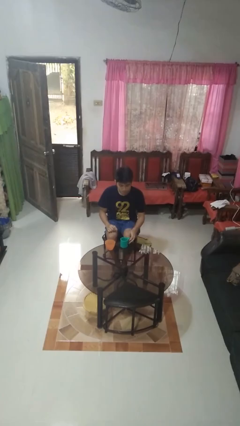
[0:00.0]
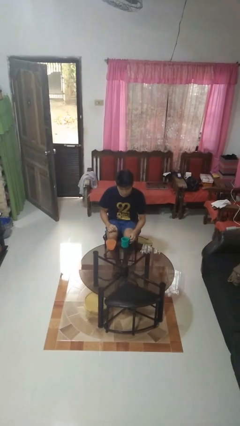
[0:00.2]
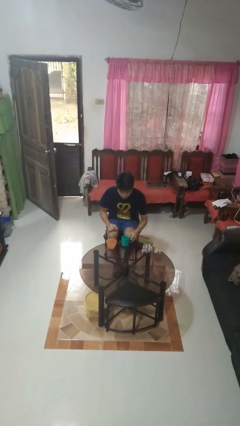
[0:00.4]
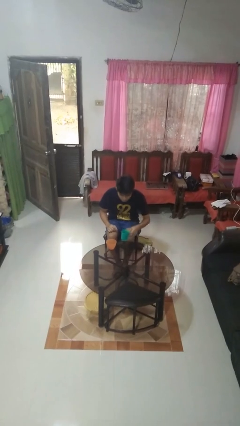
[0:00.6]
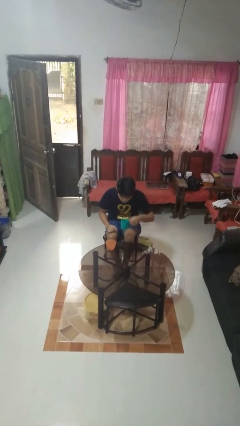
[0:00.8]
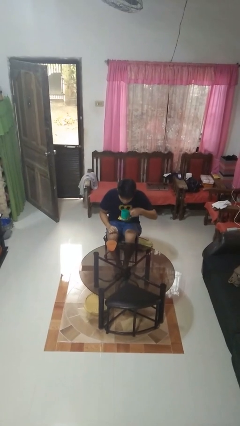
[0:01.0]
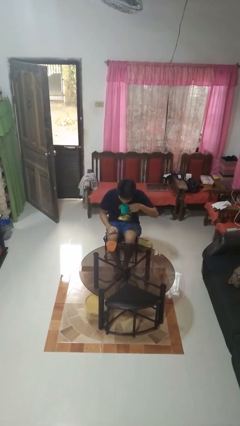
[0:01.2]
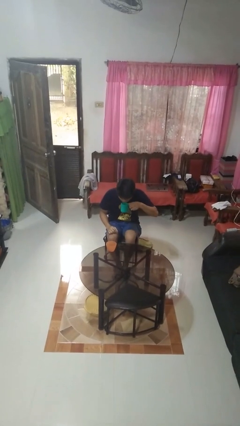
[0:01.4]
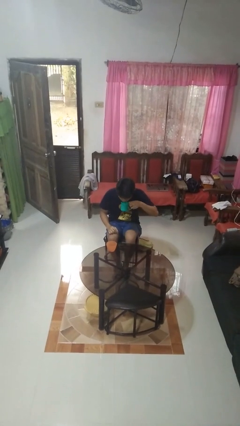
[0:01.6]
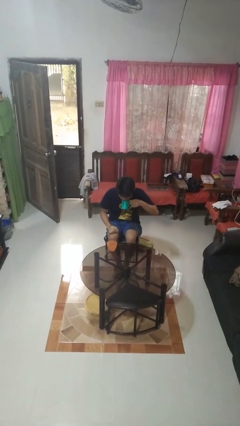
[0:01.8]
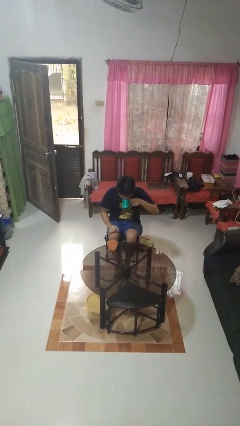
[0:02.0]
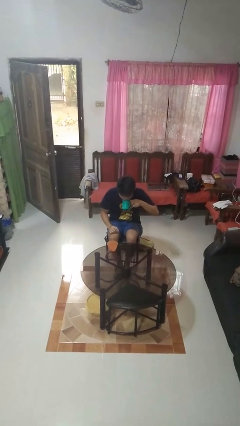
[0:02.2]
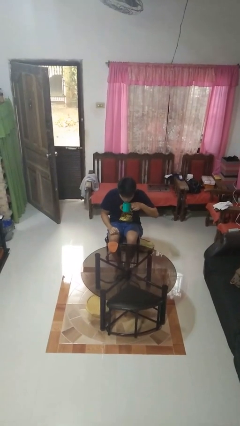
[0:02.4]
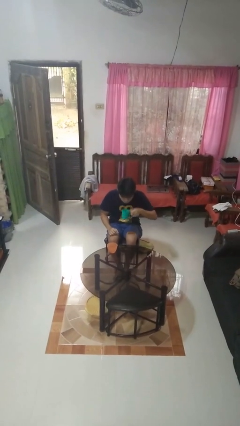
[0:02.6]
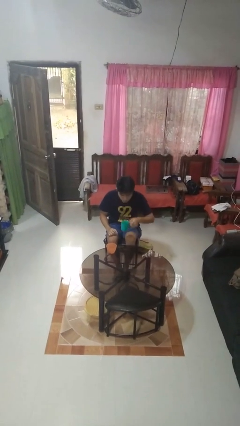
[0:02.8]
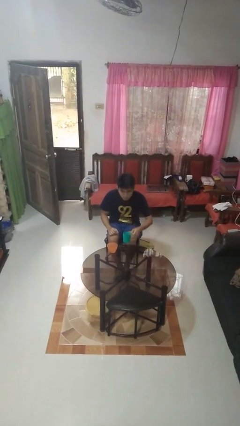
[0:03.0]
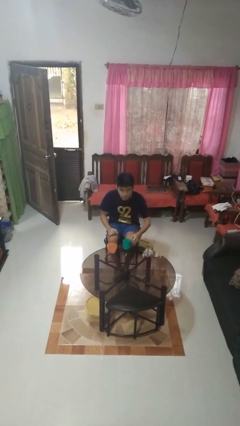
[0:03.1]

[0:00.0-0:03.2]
person drinks from cup

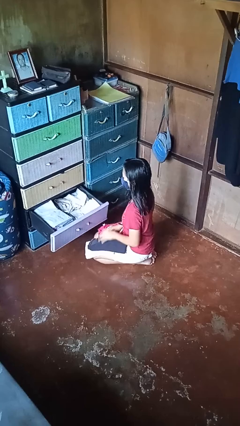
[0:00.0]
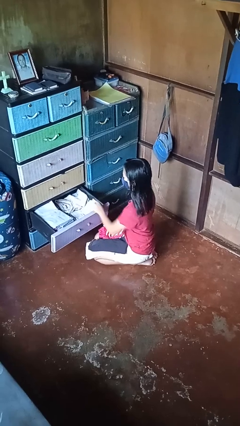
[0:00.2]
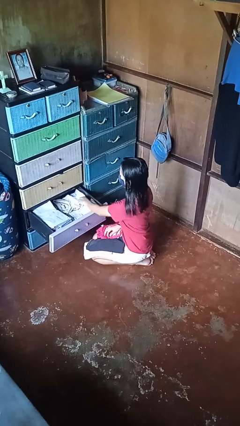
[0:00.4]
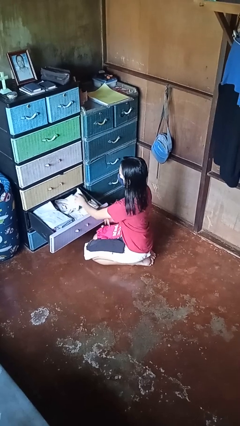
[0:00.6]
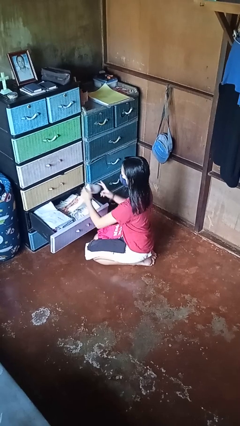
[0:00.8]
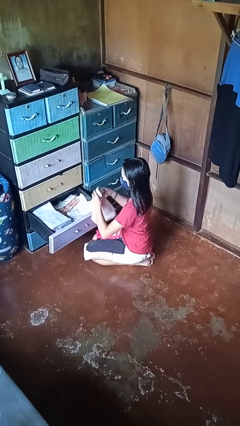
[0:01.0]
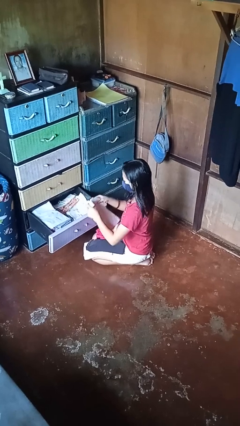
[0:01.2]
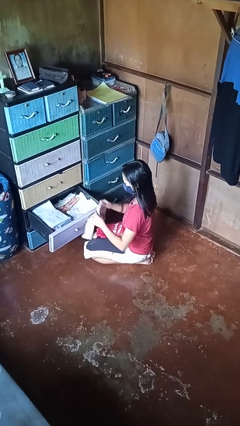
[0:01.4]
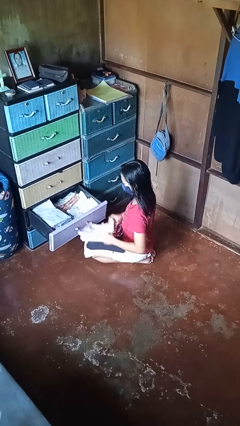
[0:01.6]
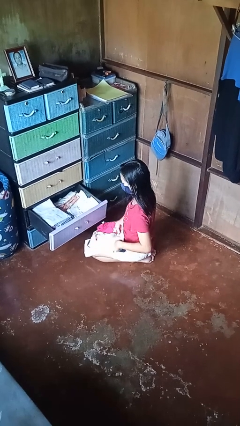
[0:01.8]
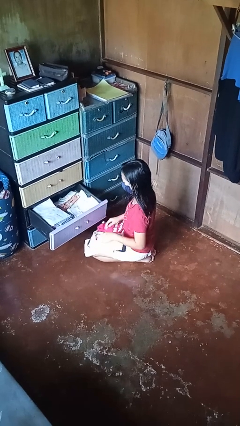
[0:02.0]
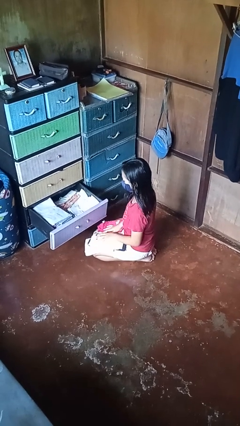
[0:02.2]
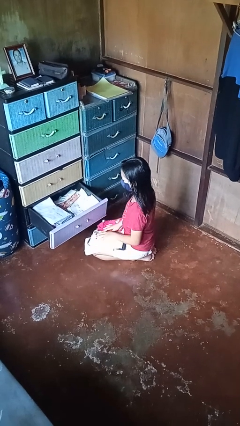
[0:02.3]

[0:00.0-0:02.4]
person takes clothes from dresser

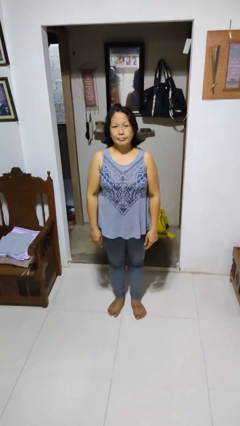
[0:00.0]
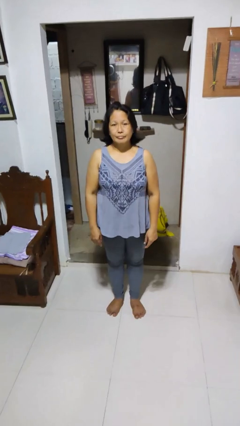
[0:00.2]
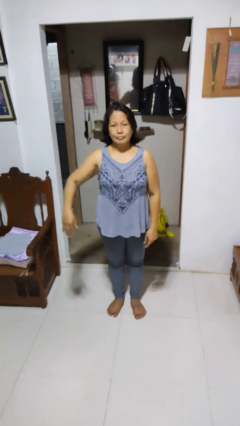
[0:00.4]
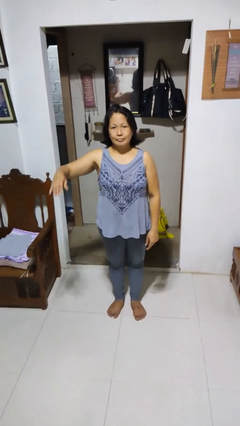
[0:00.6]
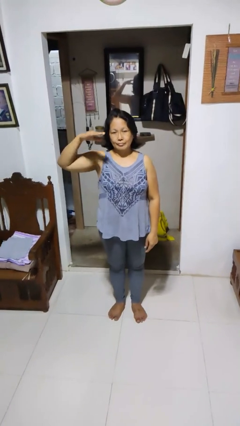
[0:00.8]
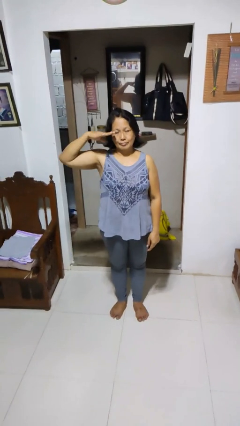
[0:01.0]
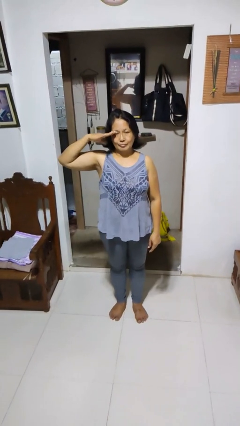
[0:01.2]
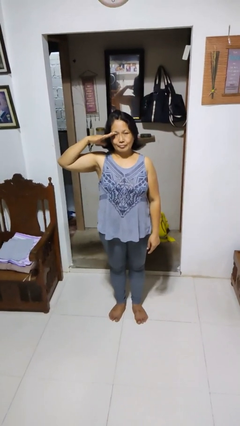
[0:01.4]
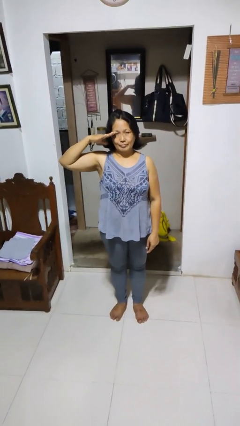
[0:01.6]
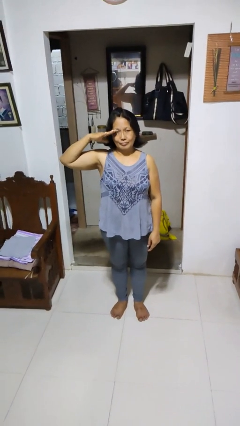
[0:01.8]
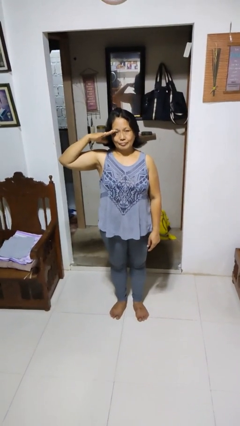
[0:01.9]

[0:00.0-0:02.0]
person salutes

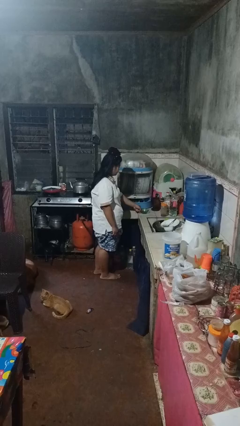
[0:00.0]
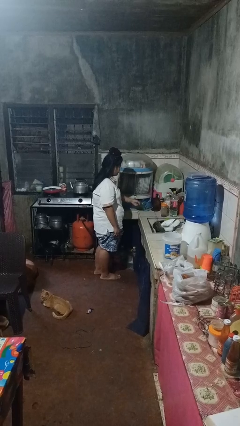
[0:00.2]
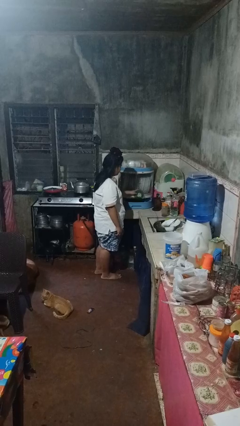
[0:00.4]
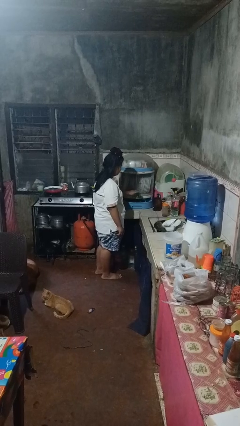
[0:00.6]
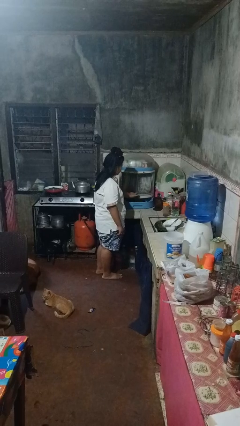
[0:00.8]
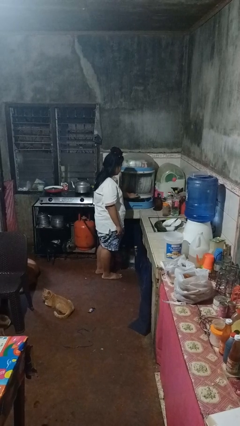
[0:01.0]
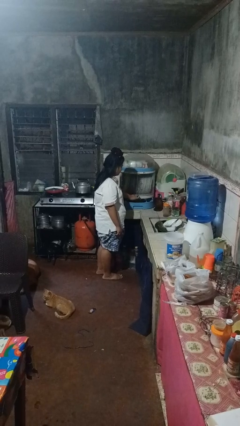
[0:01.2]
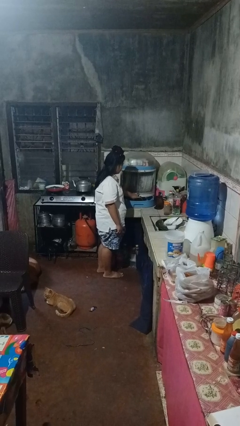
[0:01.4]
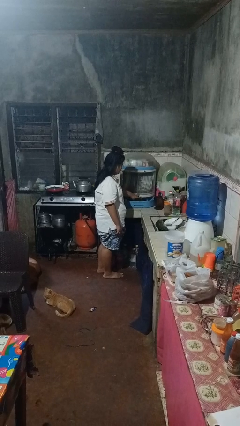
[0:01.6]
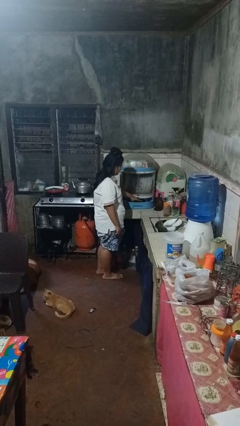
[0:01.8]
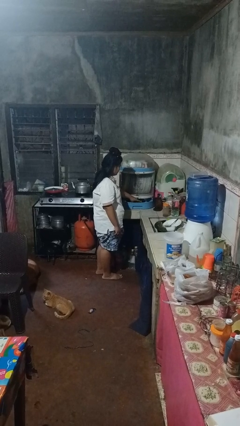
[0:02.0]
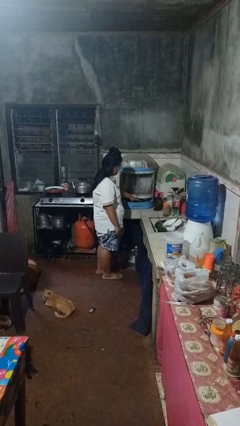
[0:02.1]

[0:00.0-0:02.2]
person puts object into kitchen drawer

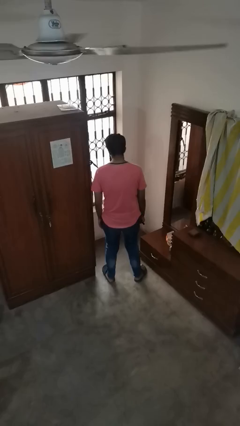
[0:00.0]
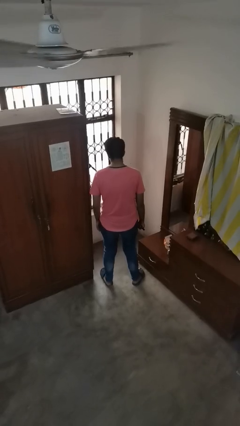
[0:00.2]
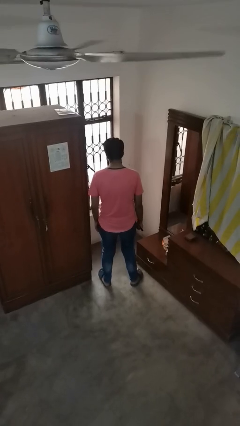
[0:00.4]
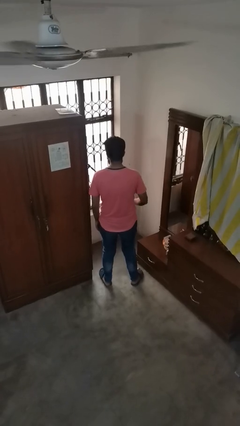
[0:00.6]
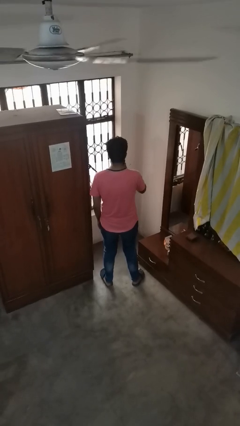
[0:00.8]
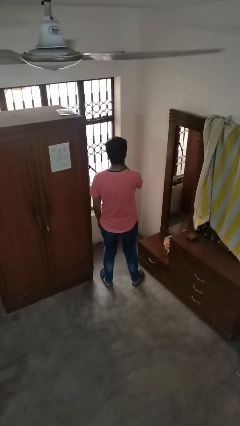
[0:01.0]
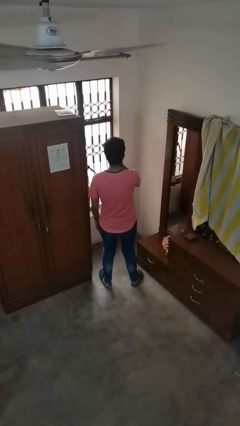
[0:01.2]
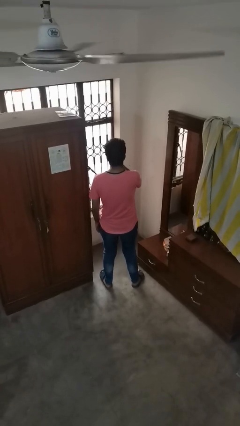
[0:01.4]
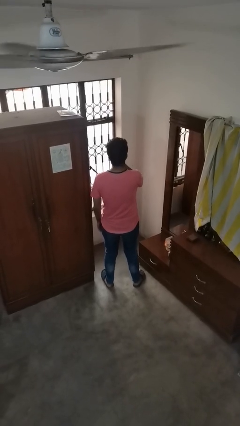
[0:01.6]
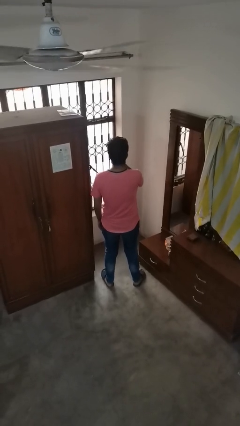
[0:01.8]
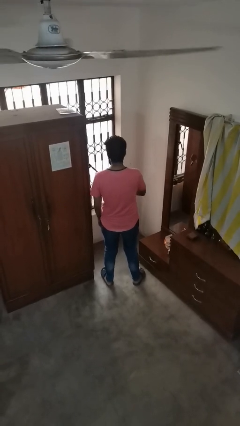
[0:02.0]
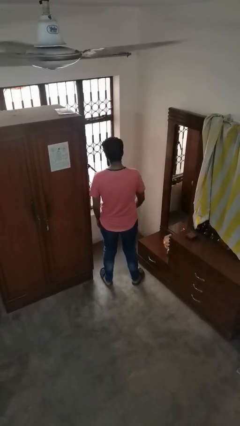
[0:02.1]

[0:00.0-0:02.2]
person vapes

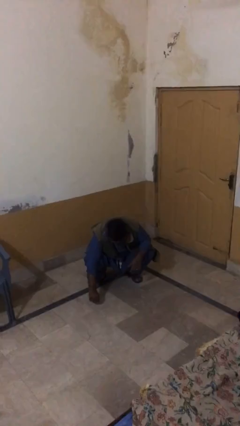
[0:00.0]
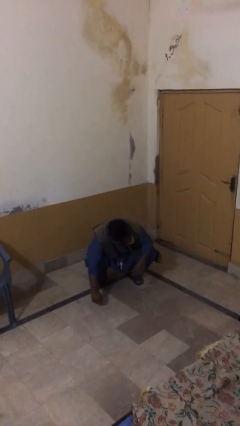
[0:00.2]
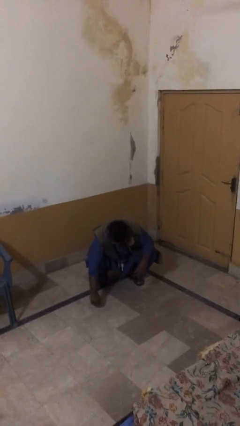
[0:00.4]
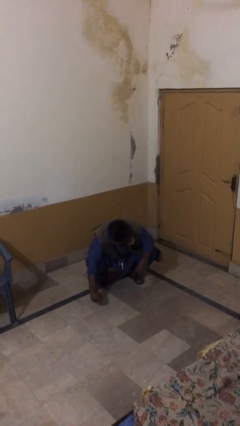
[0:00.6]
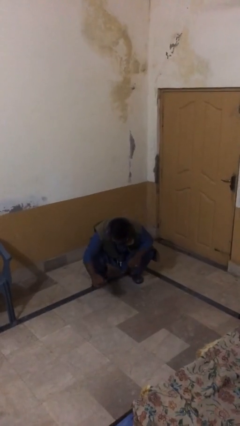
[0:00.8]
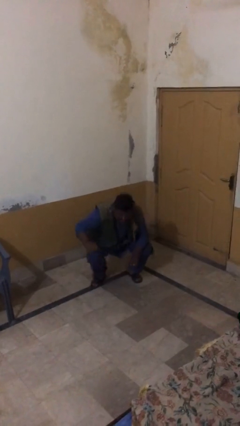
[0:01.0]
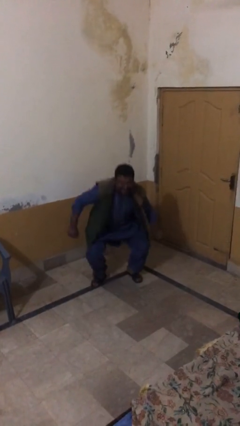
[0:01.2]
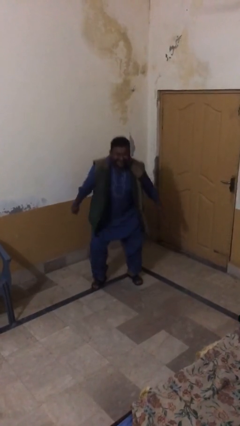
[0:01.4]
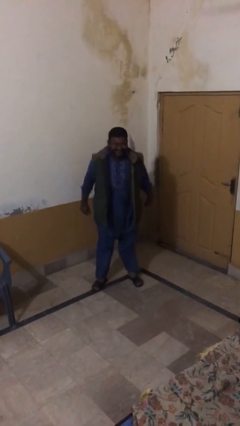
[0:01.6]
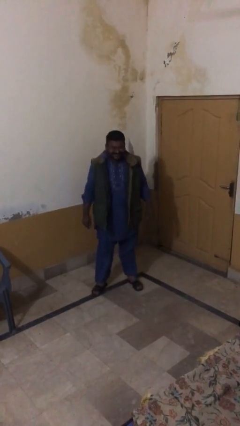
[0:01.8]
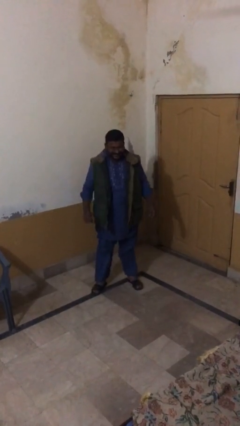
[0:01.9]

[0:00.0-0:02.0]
person stands up

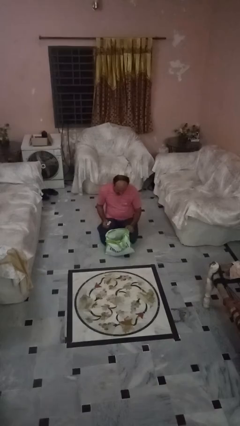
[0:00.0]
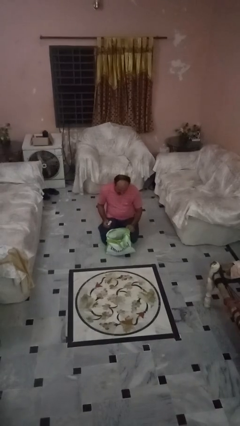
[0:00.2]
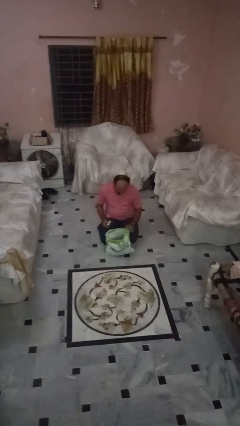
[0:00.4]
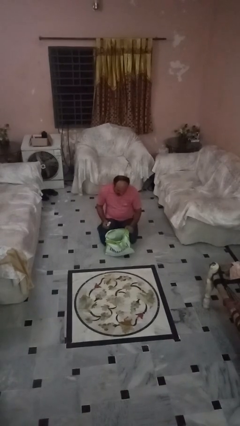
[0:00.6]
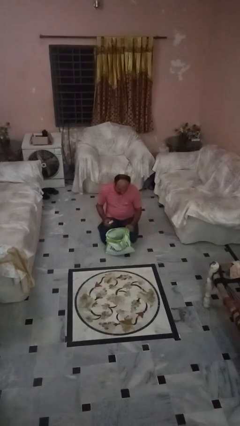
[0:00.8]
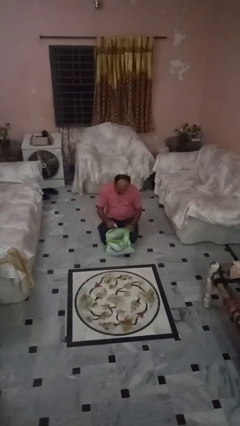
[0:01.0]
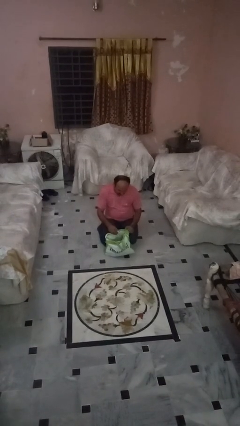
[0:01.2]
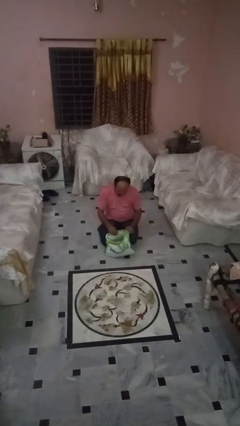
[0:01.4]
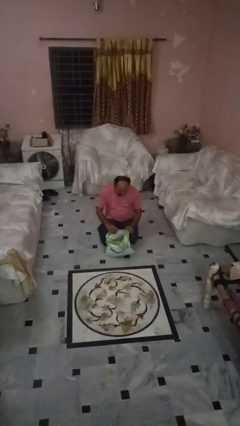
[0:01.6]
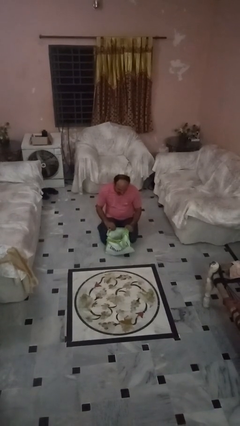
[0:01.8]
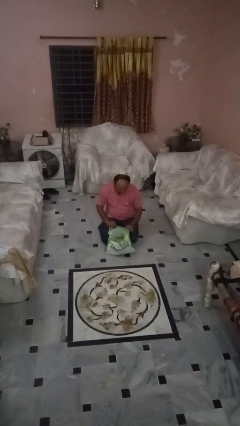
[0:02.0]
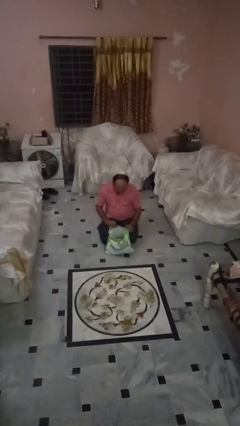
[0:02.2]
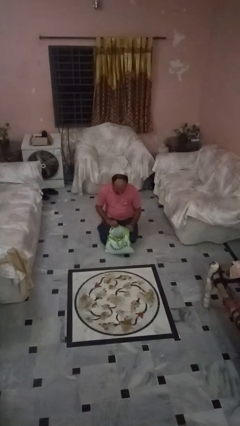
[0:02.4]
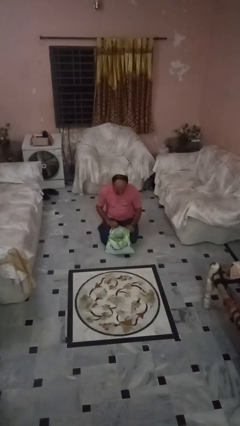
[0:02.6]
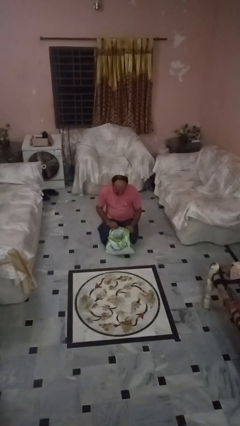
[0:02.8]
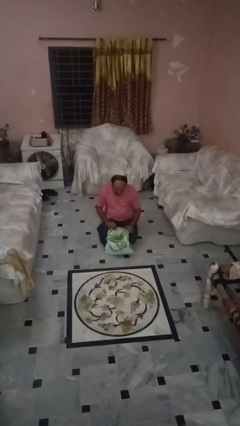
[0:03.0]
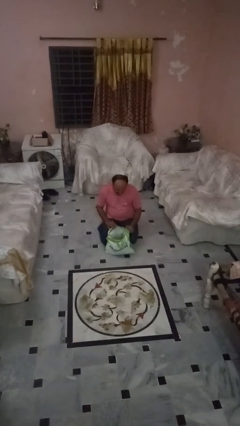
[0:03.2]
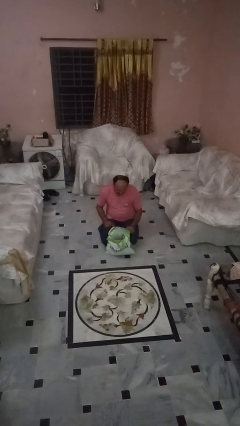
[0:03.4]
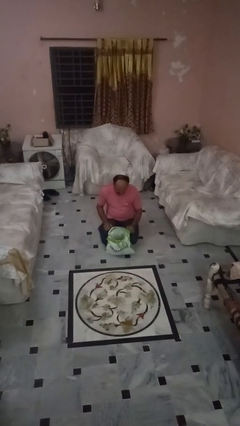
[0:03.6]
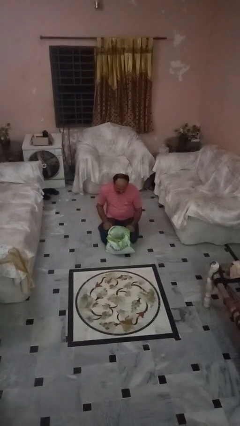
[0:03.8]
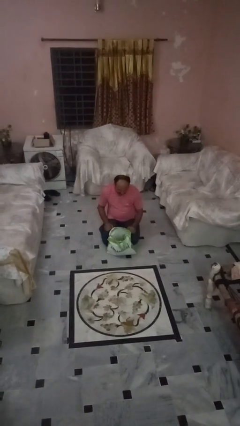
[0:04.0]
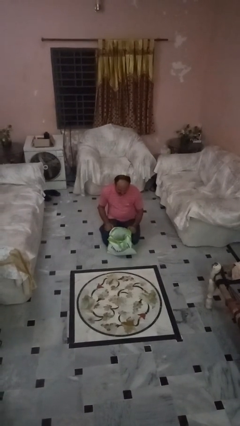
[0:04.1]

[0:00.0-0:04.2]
person puts object into bag
